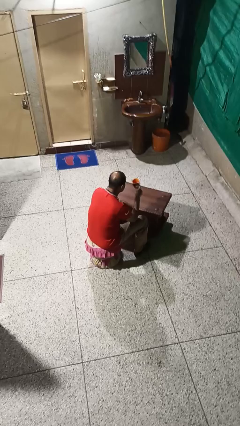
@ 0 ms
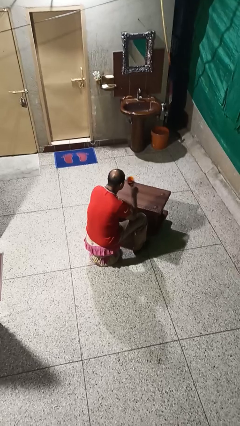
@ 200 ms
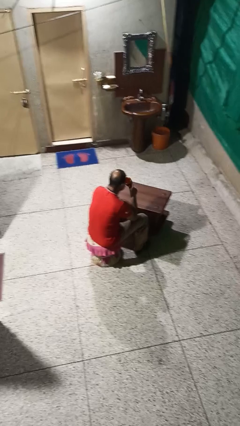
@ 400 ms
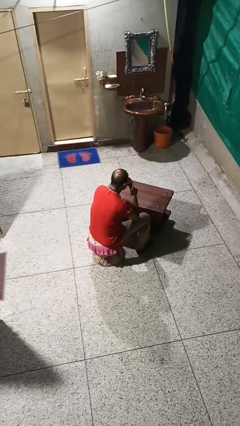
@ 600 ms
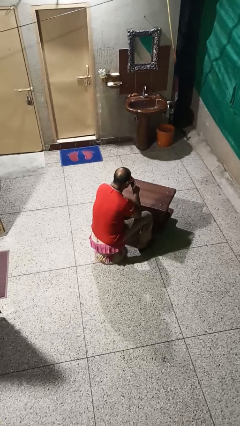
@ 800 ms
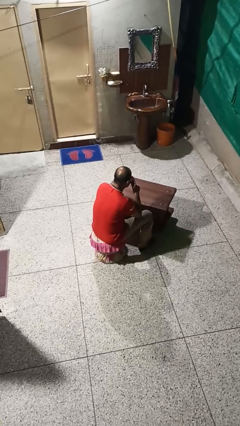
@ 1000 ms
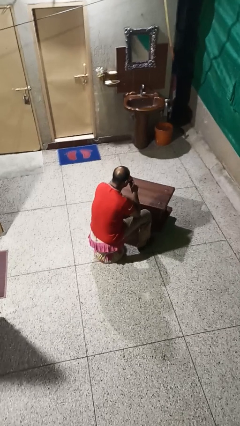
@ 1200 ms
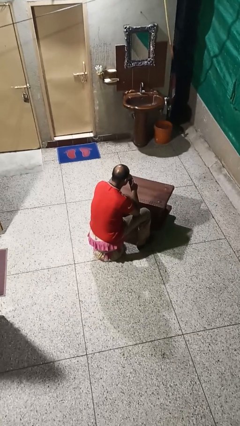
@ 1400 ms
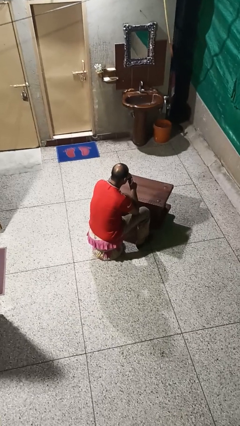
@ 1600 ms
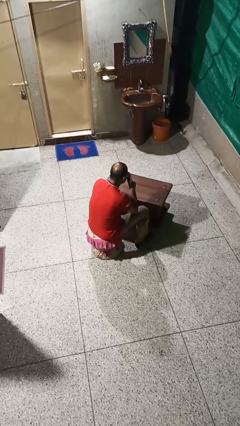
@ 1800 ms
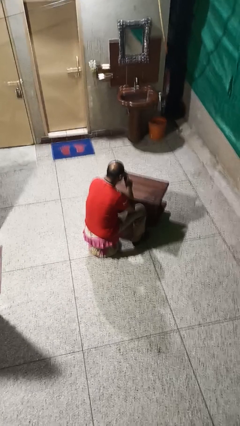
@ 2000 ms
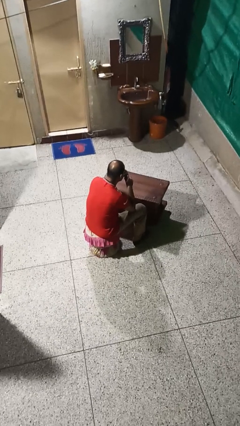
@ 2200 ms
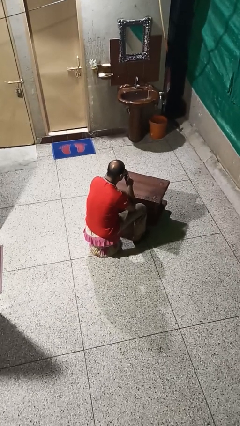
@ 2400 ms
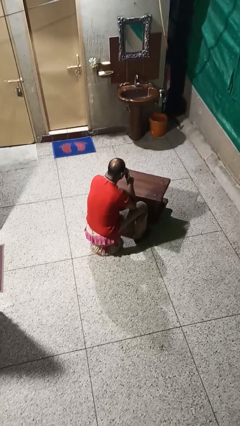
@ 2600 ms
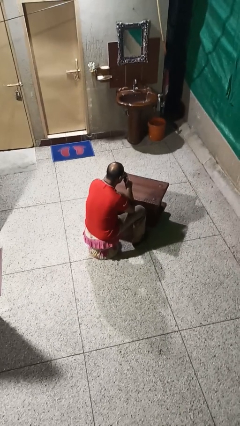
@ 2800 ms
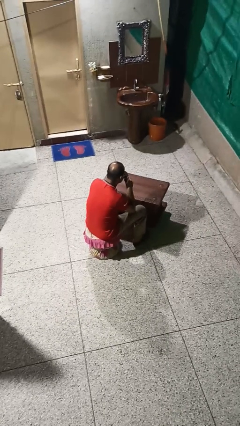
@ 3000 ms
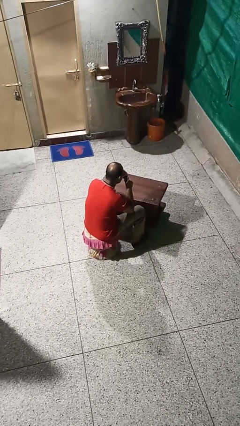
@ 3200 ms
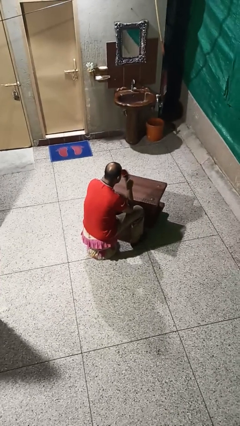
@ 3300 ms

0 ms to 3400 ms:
person drinks from mug

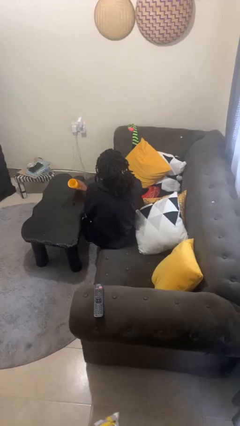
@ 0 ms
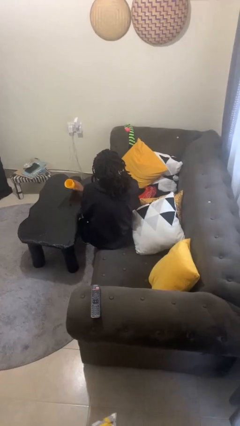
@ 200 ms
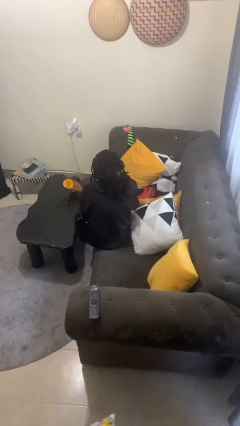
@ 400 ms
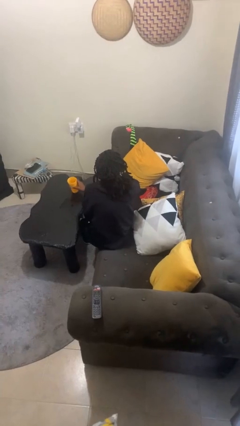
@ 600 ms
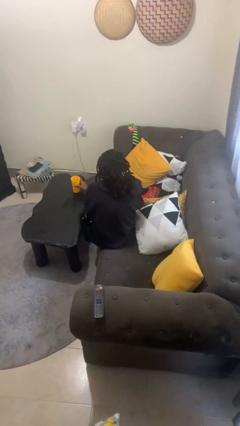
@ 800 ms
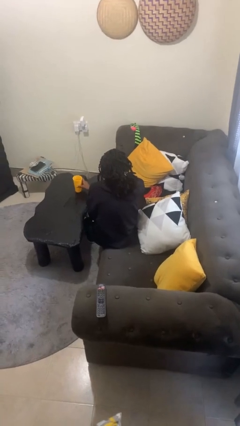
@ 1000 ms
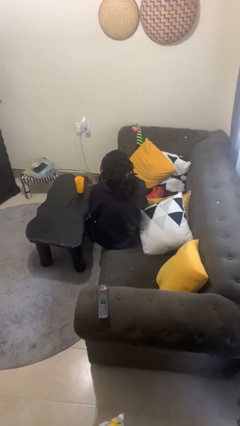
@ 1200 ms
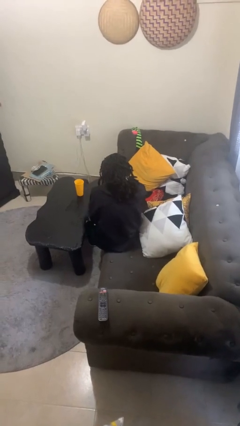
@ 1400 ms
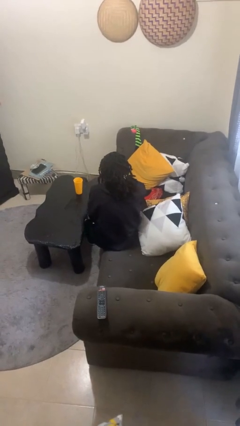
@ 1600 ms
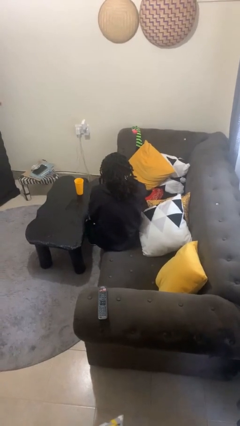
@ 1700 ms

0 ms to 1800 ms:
person sets upright glass

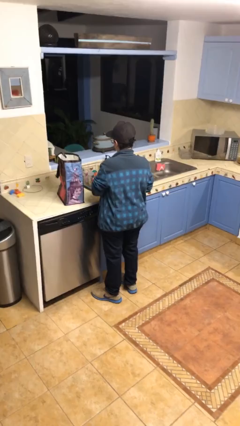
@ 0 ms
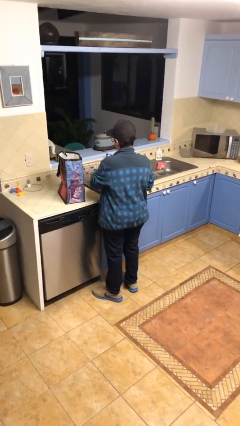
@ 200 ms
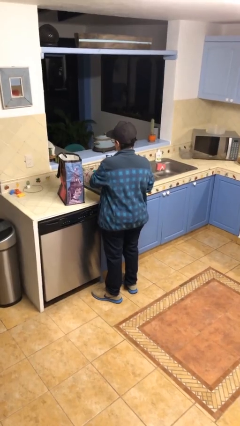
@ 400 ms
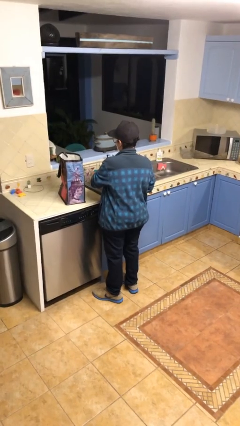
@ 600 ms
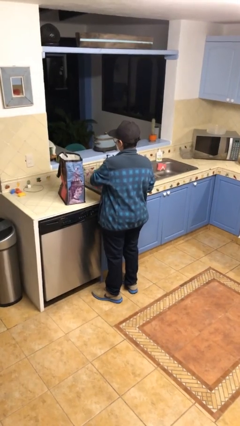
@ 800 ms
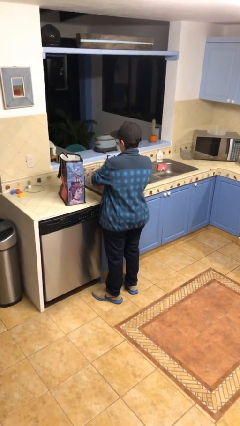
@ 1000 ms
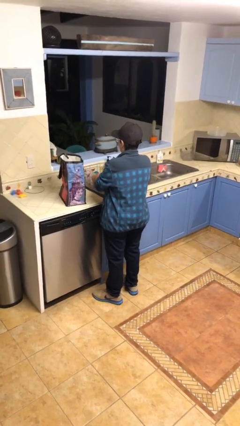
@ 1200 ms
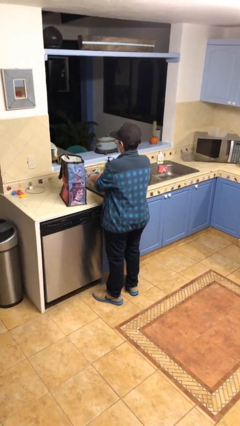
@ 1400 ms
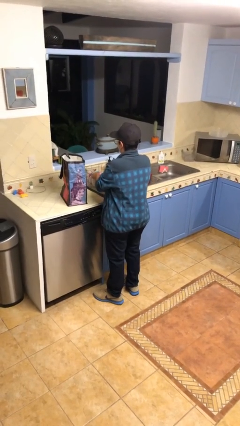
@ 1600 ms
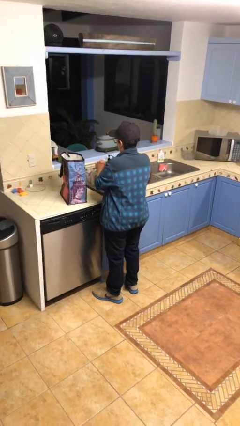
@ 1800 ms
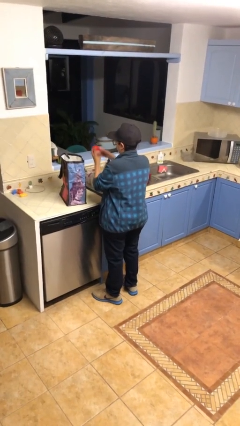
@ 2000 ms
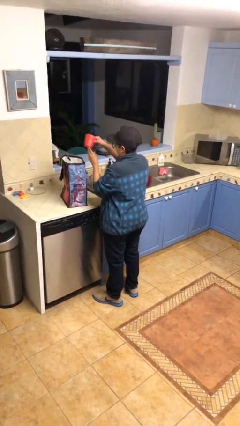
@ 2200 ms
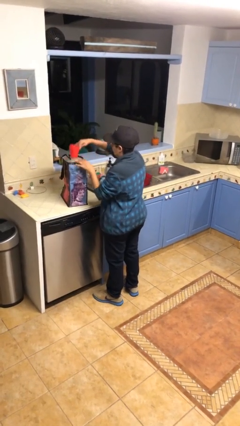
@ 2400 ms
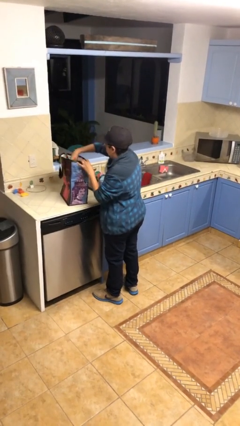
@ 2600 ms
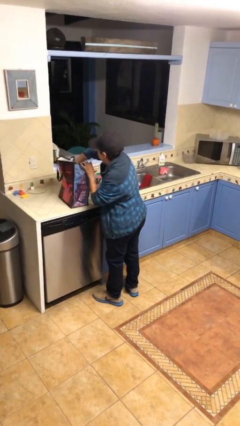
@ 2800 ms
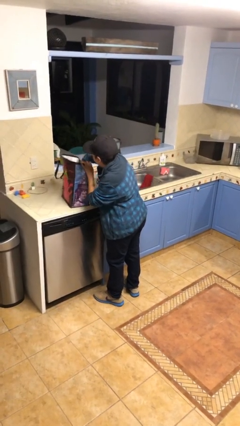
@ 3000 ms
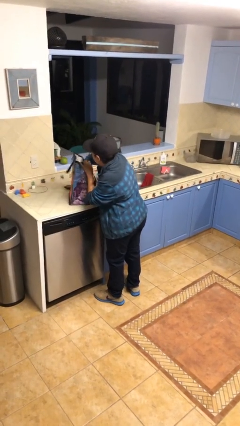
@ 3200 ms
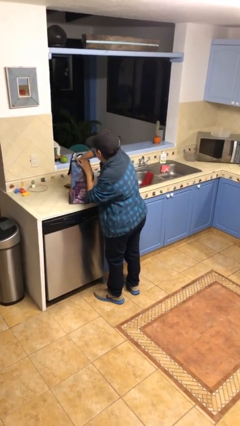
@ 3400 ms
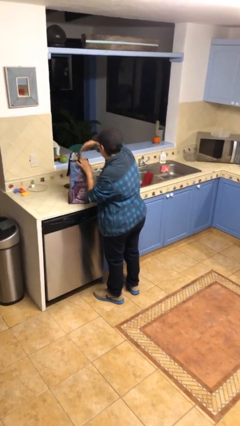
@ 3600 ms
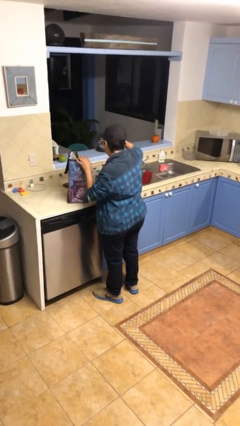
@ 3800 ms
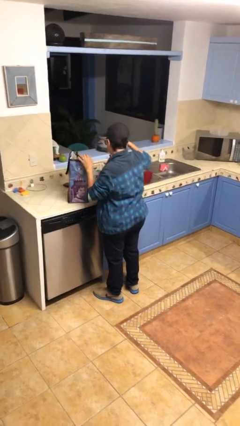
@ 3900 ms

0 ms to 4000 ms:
person puts object into bag

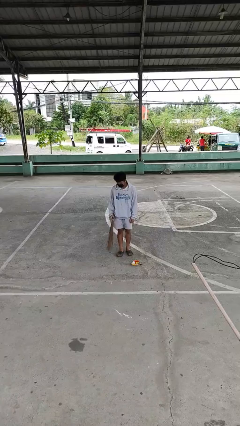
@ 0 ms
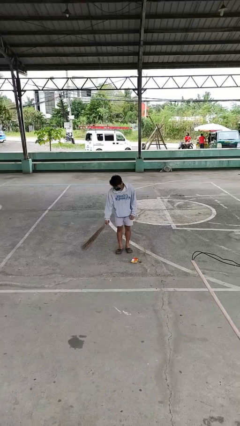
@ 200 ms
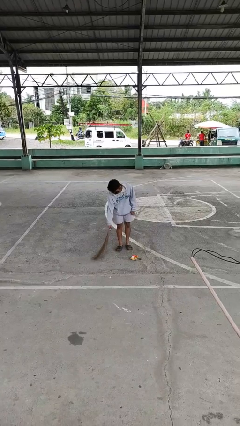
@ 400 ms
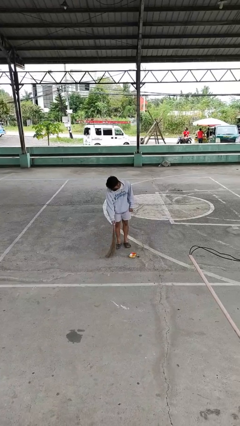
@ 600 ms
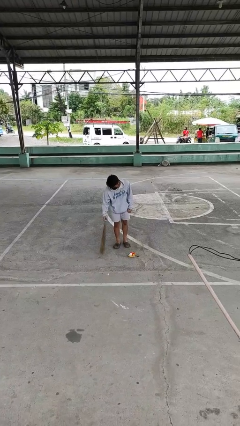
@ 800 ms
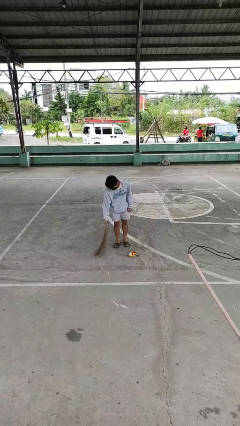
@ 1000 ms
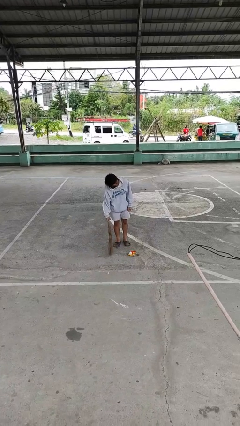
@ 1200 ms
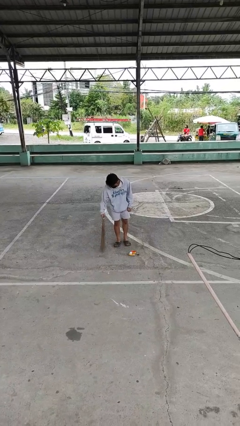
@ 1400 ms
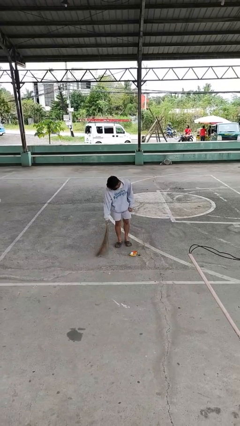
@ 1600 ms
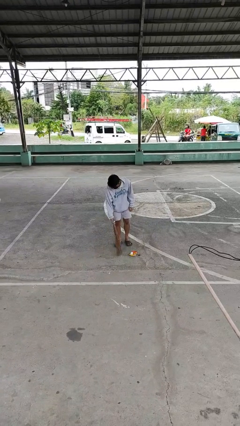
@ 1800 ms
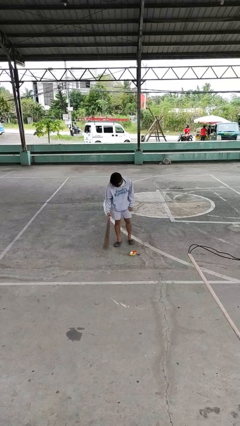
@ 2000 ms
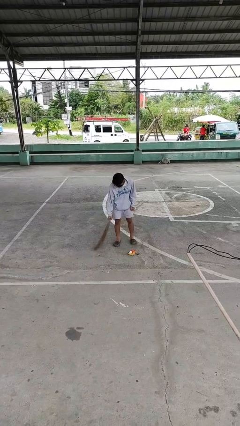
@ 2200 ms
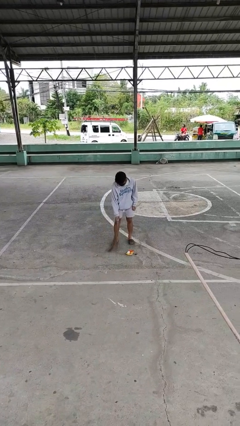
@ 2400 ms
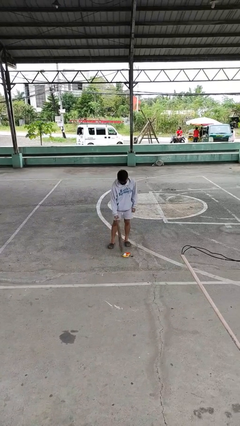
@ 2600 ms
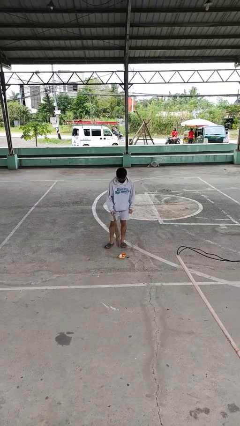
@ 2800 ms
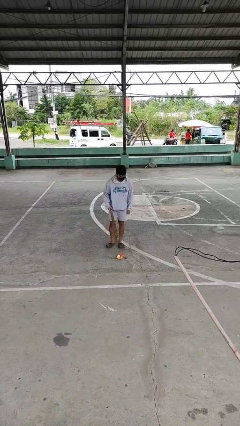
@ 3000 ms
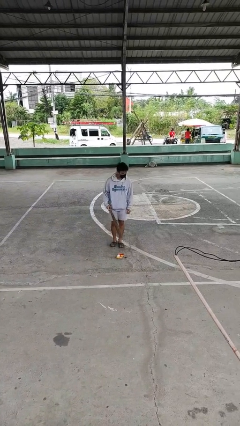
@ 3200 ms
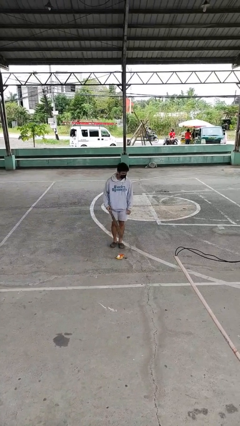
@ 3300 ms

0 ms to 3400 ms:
person sweeps floor

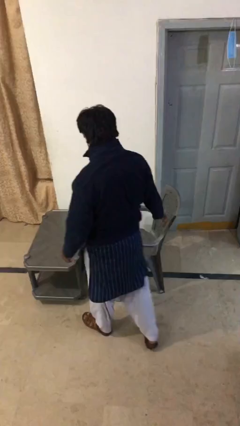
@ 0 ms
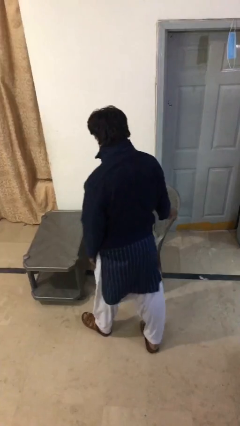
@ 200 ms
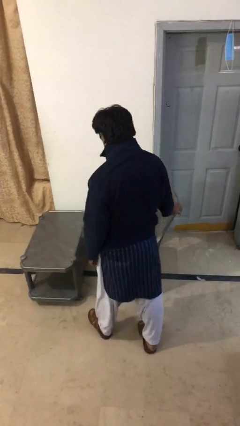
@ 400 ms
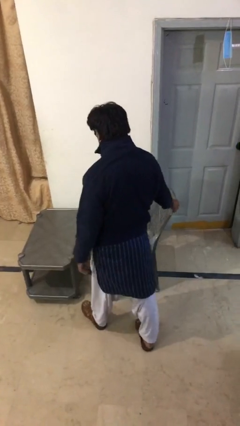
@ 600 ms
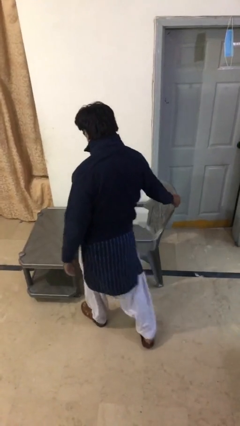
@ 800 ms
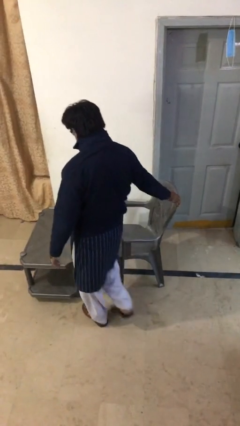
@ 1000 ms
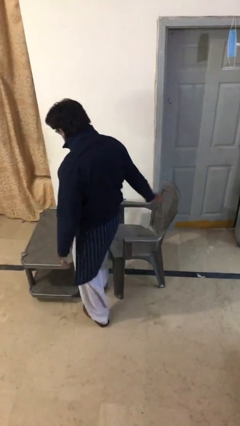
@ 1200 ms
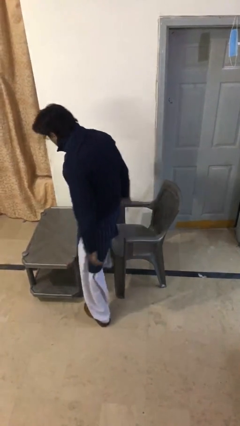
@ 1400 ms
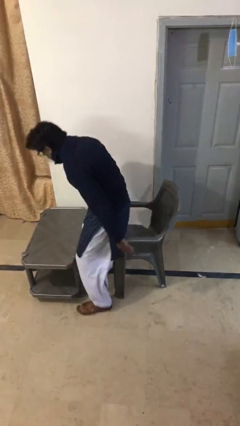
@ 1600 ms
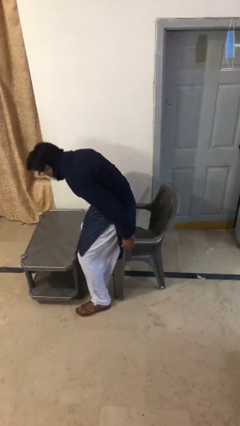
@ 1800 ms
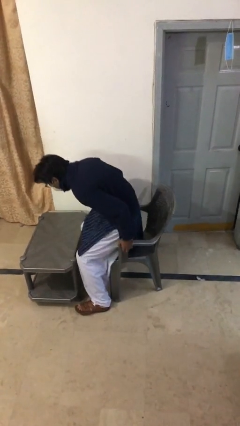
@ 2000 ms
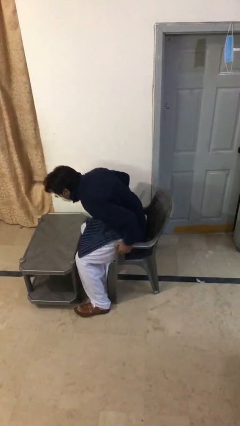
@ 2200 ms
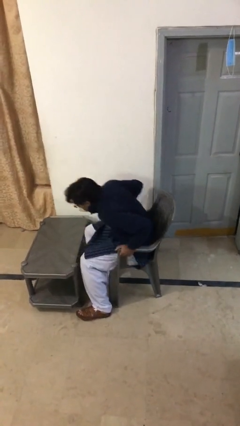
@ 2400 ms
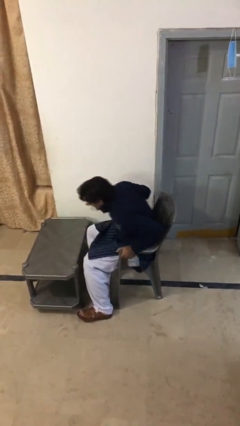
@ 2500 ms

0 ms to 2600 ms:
person sits down

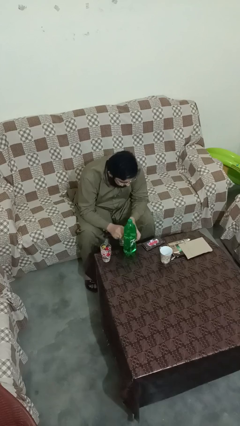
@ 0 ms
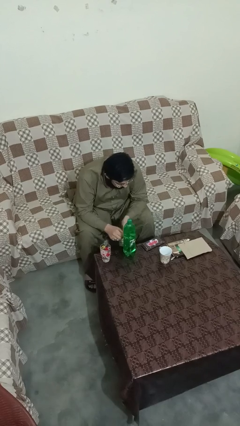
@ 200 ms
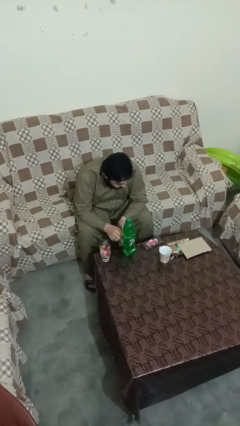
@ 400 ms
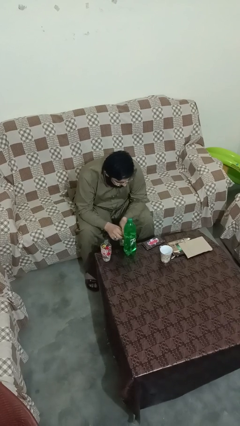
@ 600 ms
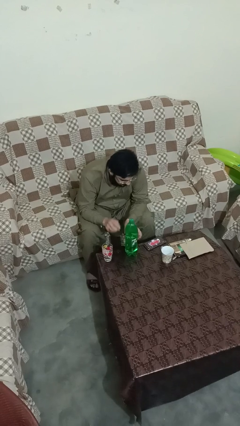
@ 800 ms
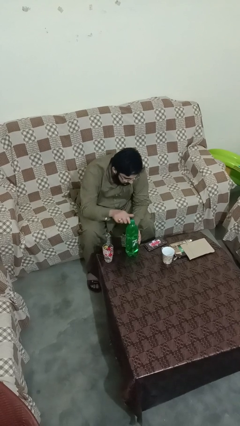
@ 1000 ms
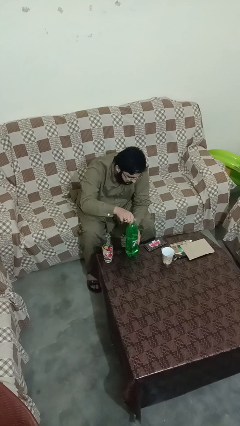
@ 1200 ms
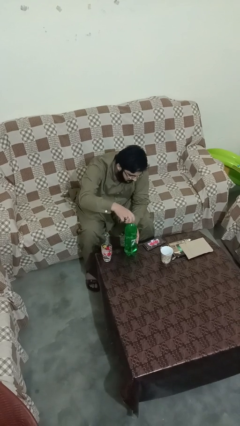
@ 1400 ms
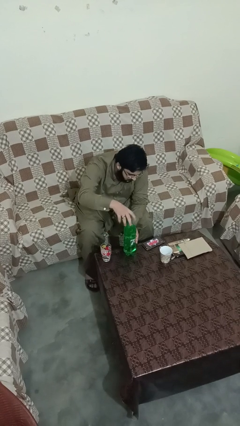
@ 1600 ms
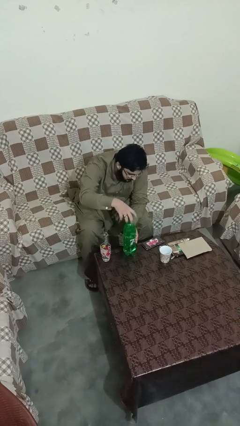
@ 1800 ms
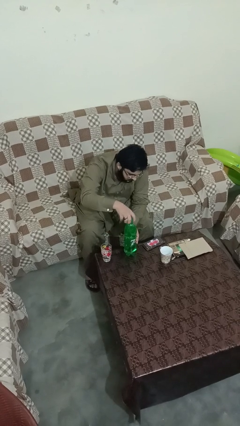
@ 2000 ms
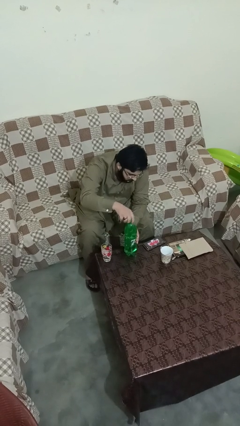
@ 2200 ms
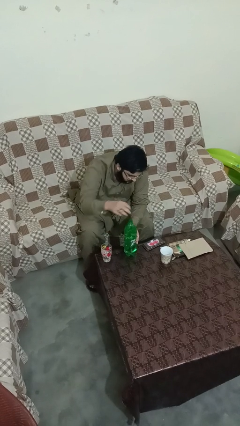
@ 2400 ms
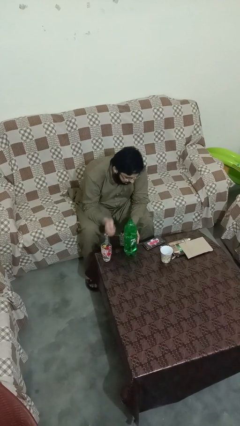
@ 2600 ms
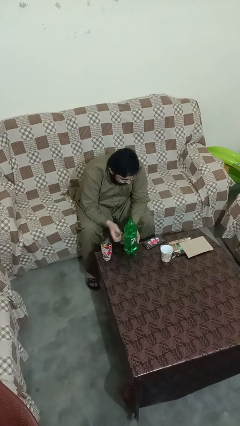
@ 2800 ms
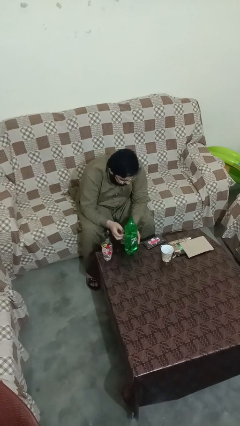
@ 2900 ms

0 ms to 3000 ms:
person unscrews lid from bottle
